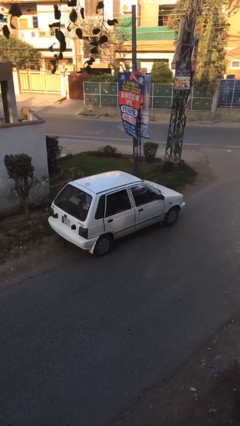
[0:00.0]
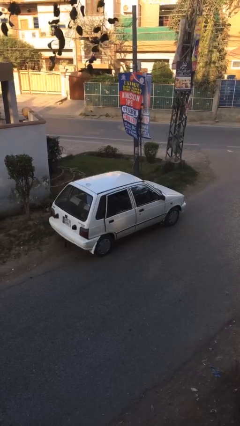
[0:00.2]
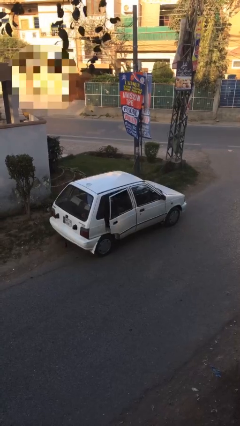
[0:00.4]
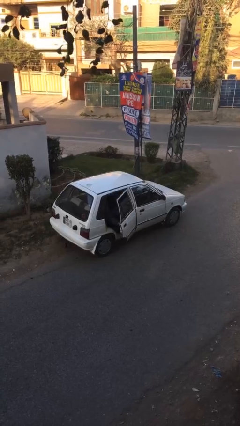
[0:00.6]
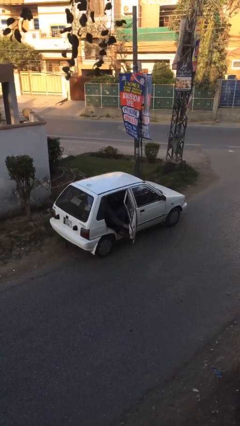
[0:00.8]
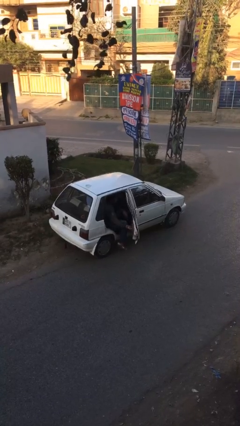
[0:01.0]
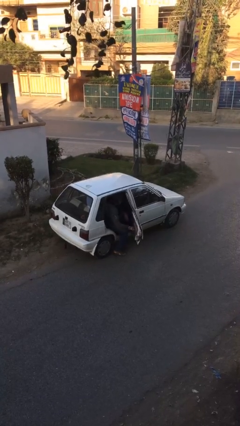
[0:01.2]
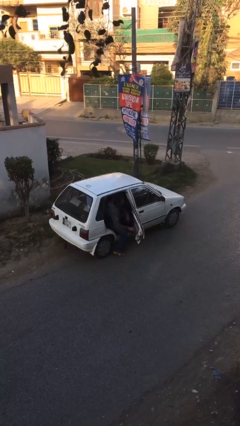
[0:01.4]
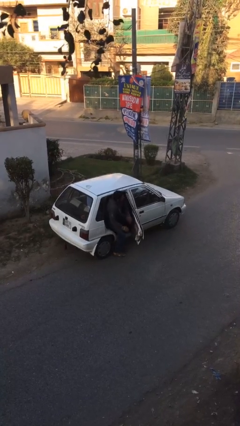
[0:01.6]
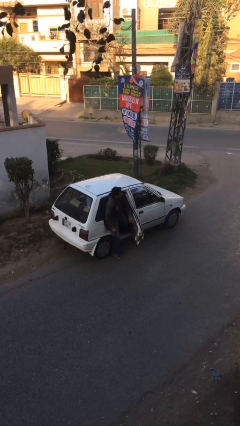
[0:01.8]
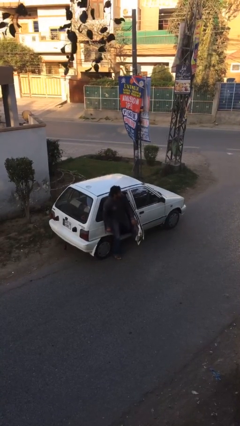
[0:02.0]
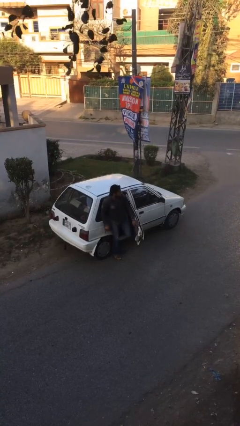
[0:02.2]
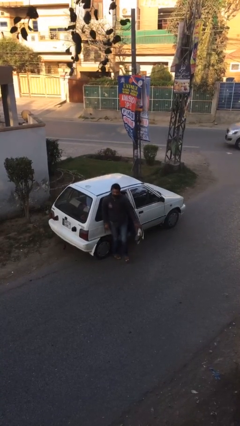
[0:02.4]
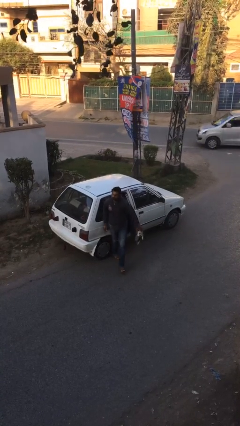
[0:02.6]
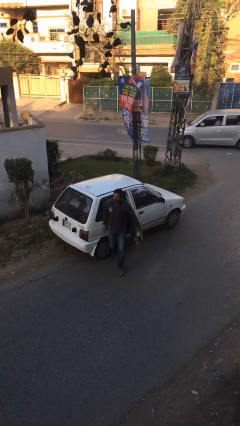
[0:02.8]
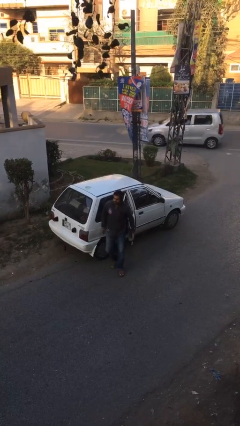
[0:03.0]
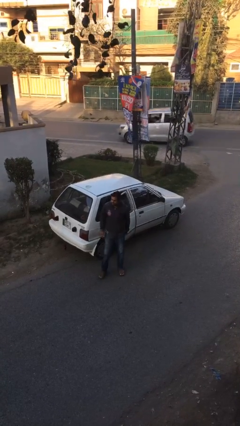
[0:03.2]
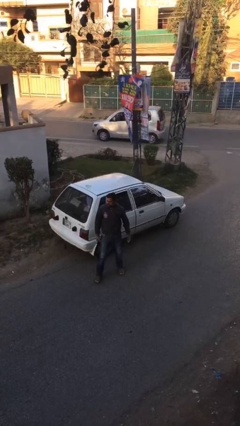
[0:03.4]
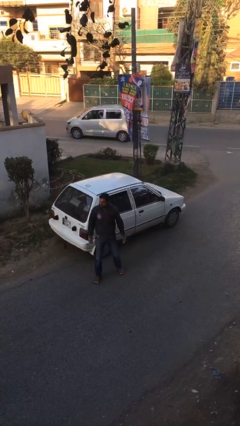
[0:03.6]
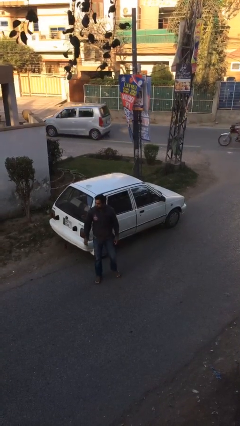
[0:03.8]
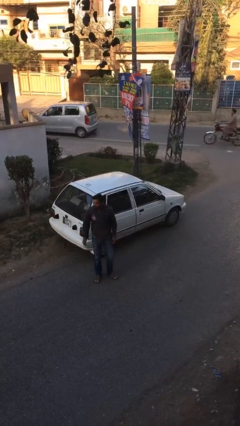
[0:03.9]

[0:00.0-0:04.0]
car drops off person

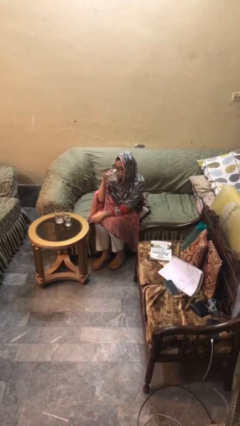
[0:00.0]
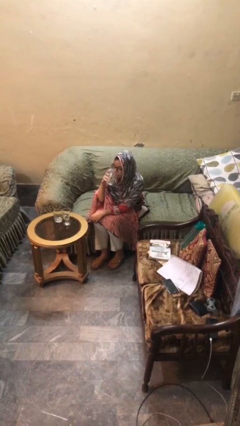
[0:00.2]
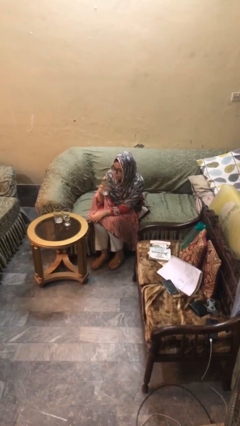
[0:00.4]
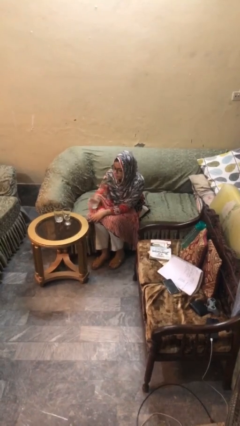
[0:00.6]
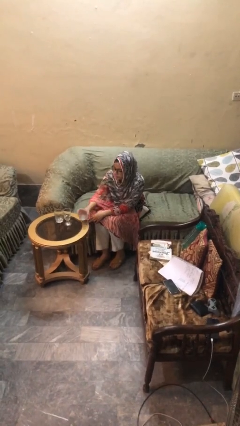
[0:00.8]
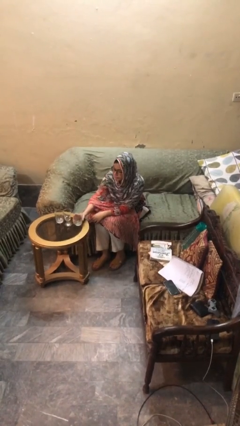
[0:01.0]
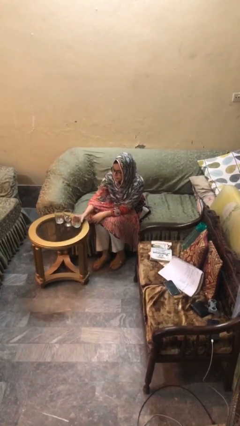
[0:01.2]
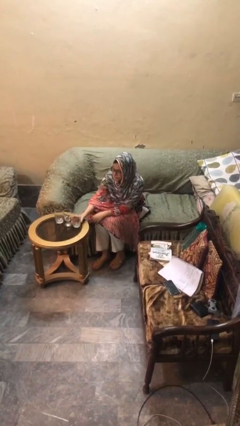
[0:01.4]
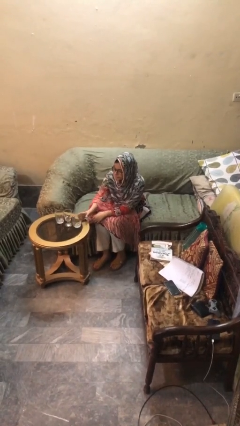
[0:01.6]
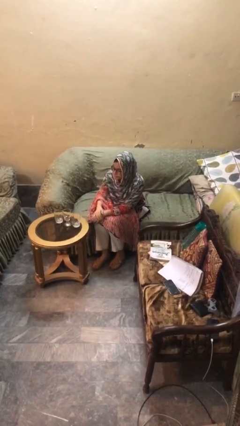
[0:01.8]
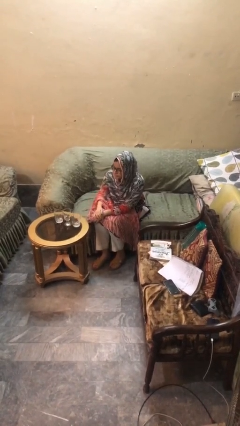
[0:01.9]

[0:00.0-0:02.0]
person puts down object on table

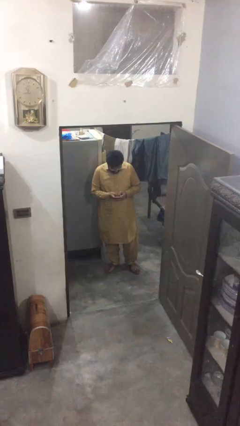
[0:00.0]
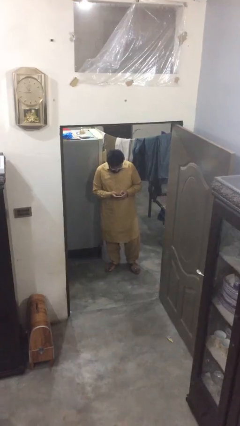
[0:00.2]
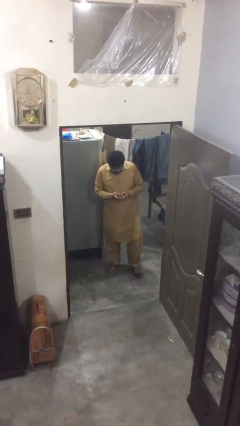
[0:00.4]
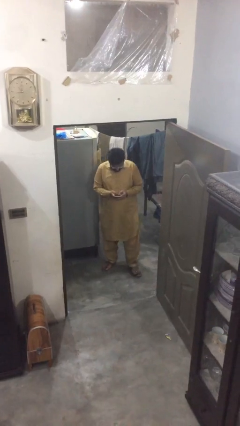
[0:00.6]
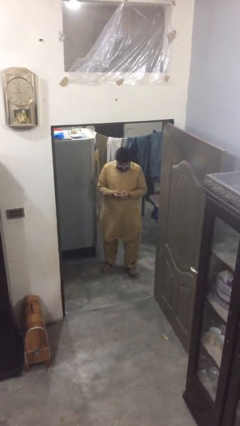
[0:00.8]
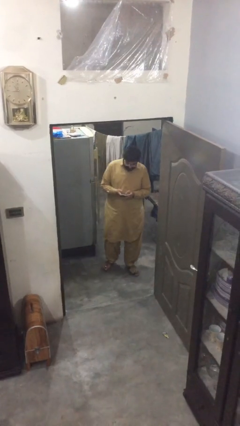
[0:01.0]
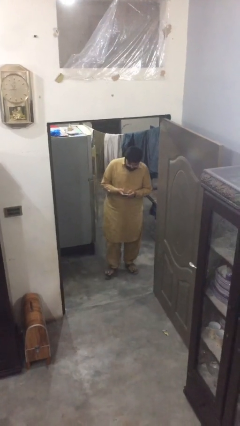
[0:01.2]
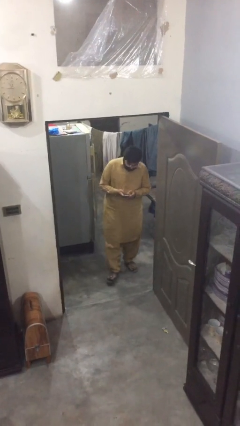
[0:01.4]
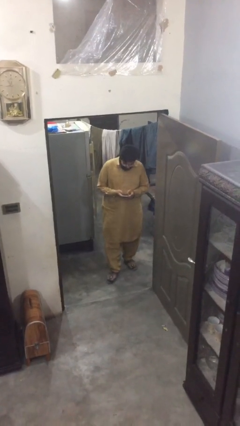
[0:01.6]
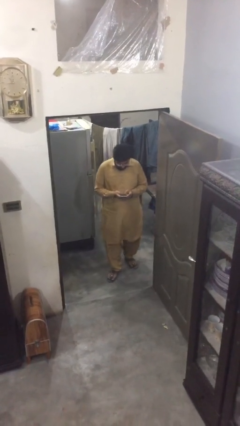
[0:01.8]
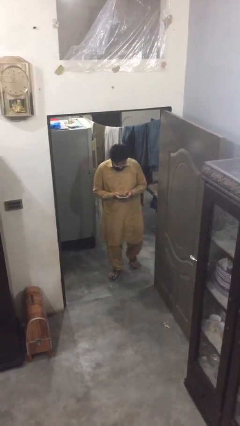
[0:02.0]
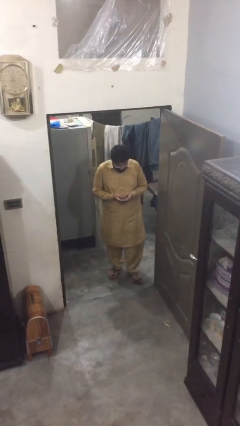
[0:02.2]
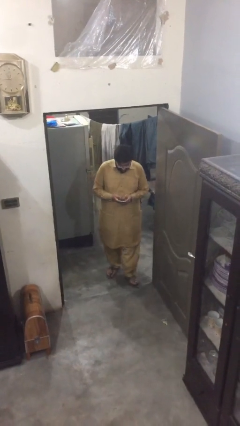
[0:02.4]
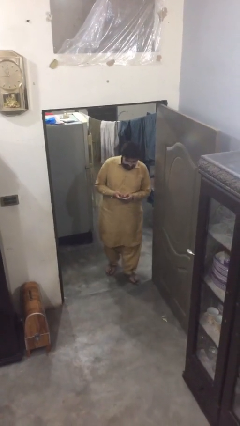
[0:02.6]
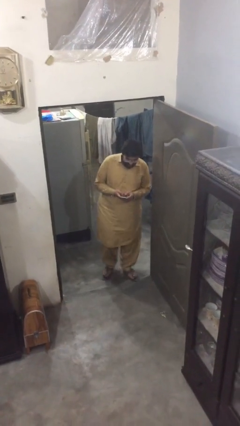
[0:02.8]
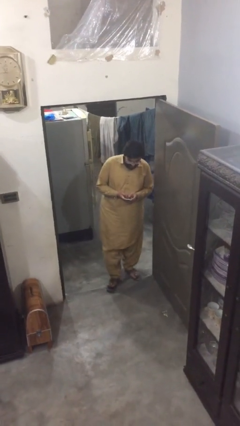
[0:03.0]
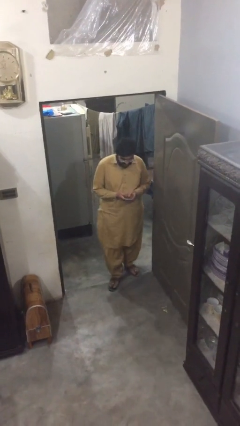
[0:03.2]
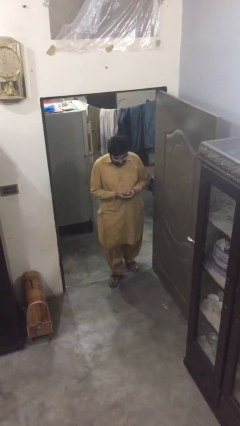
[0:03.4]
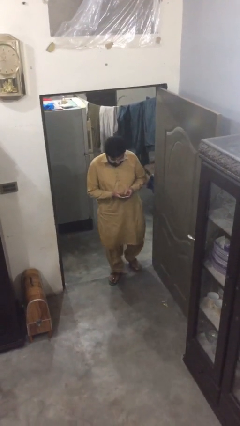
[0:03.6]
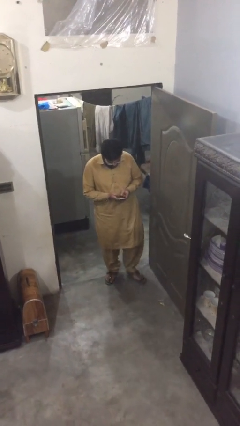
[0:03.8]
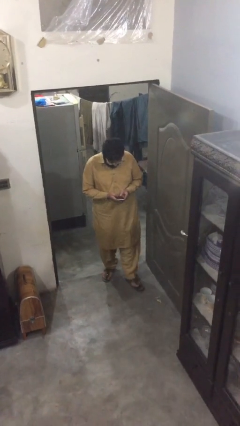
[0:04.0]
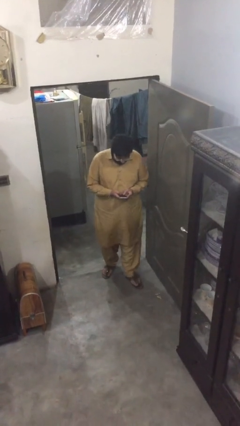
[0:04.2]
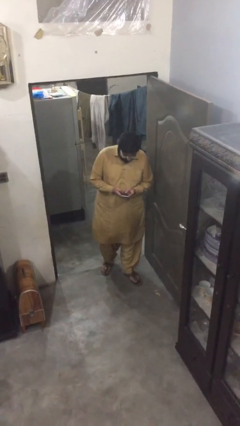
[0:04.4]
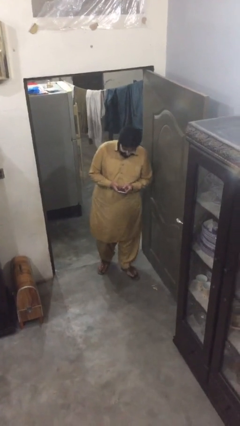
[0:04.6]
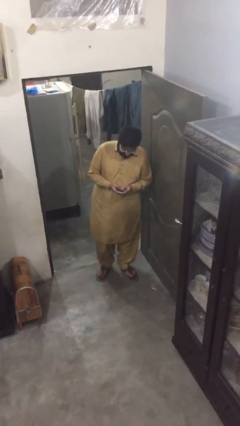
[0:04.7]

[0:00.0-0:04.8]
person texts on phone

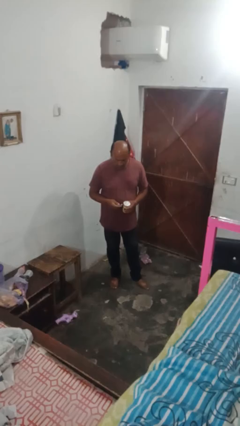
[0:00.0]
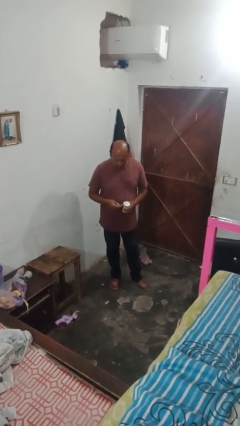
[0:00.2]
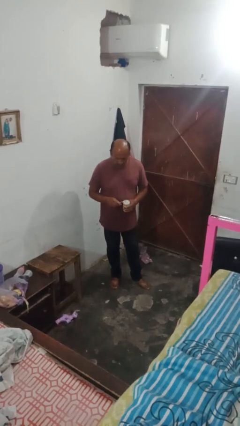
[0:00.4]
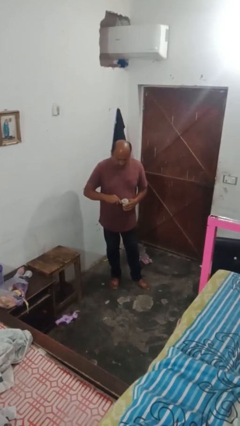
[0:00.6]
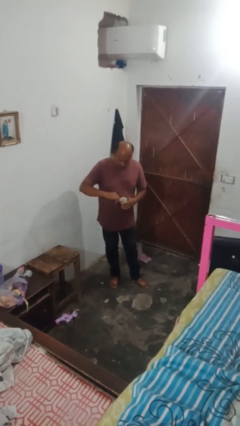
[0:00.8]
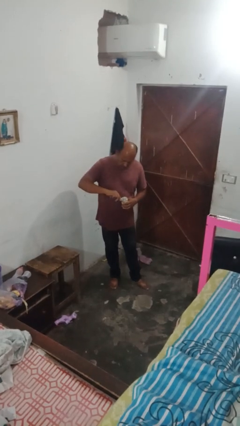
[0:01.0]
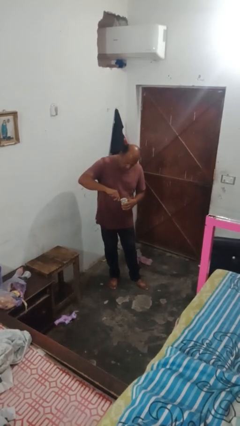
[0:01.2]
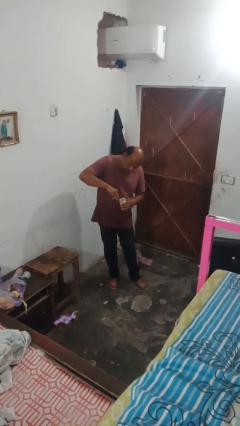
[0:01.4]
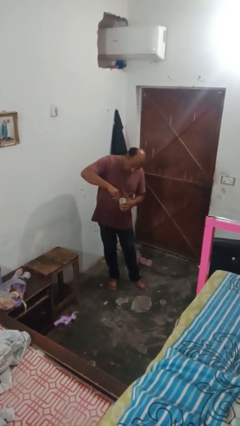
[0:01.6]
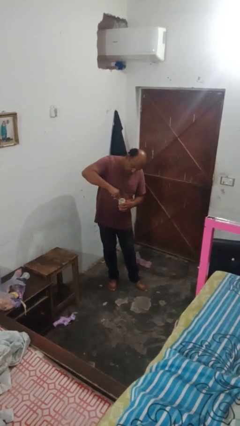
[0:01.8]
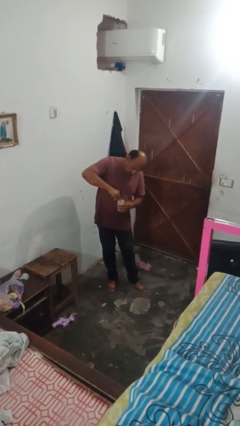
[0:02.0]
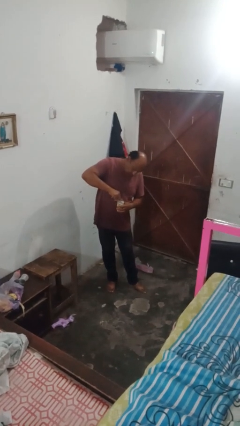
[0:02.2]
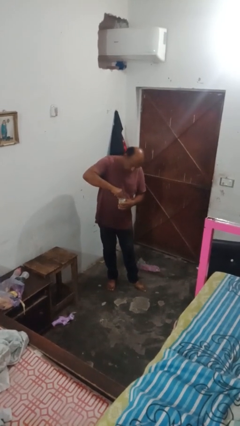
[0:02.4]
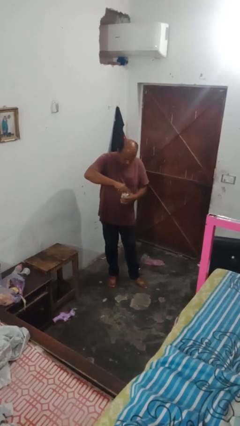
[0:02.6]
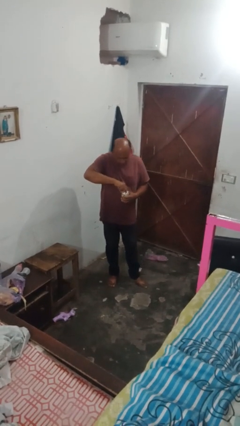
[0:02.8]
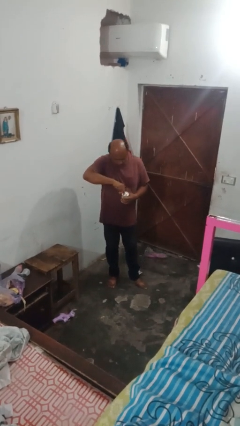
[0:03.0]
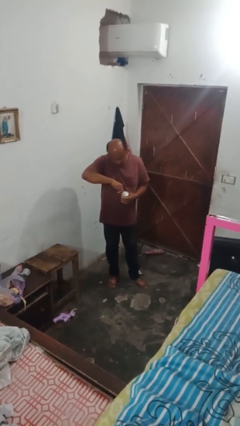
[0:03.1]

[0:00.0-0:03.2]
person opens can with can opener

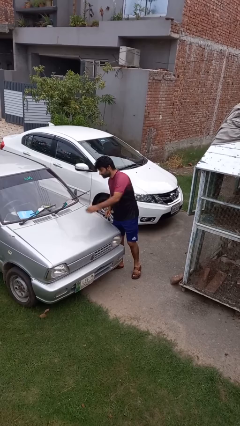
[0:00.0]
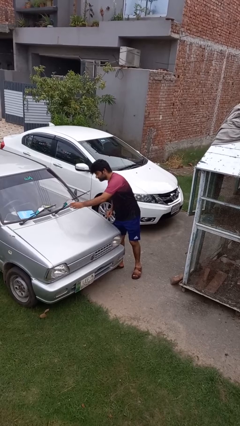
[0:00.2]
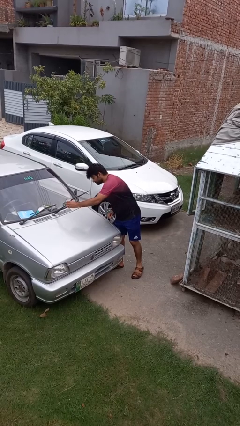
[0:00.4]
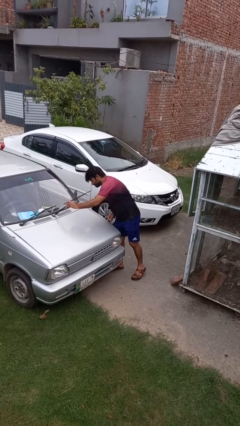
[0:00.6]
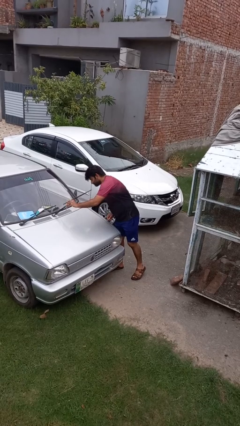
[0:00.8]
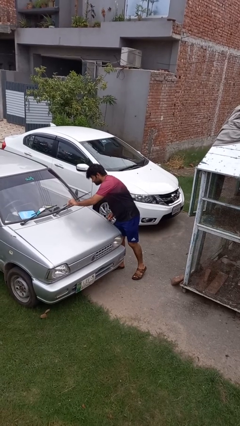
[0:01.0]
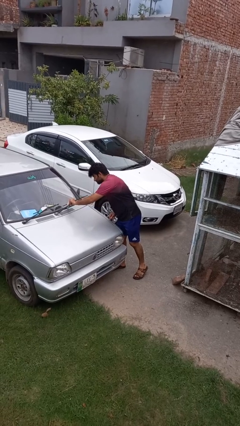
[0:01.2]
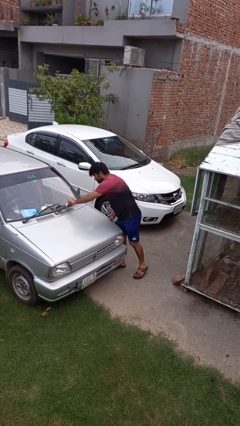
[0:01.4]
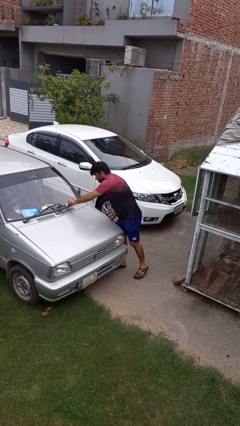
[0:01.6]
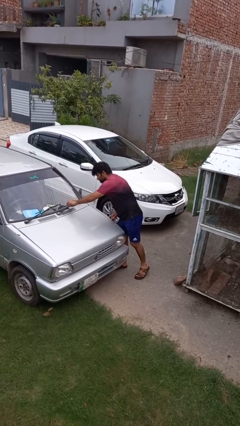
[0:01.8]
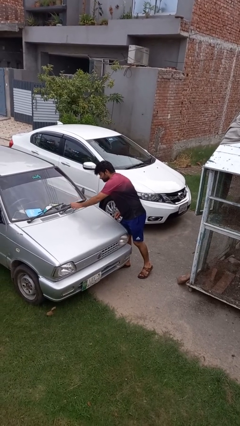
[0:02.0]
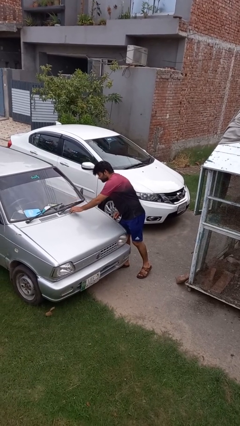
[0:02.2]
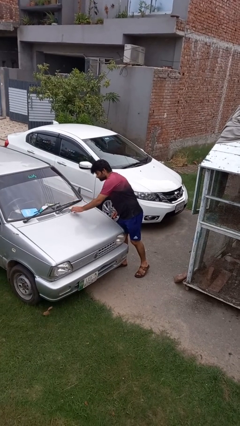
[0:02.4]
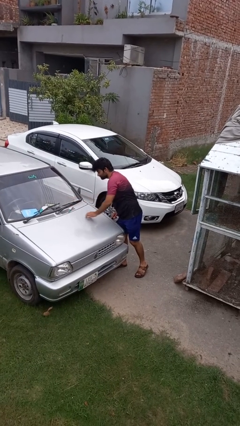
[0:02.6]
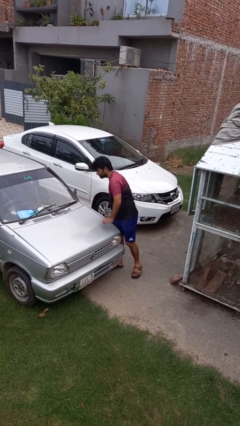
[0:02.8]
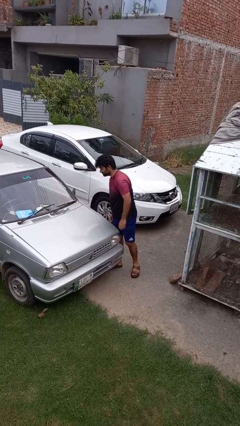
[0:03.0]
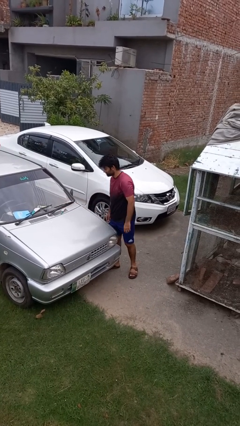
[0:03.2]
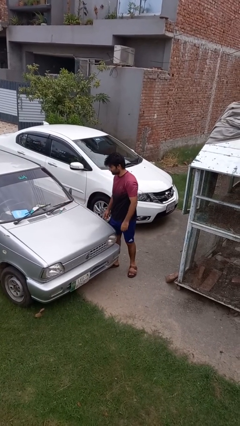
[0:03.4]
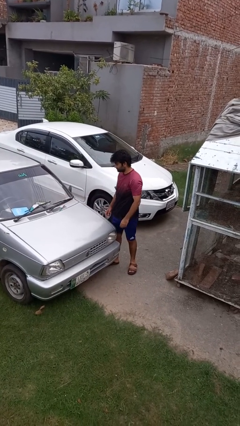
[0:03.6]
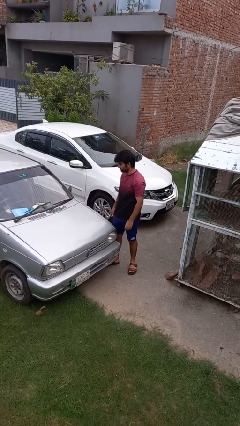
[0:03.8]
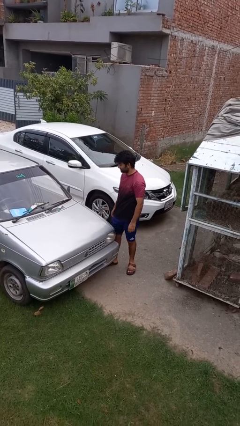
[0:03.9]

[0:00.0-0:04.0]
person flips down car wipers
